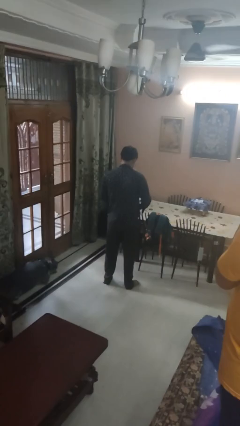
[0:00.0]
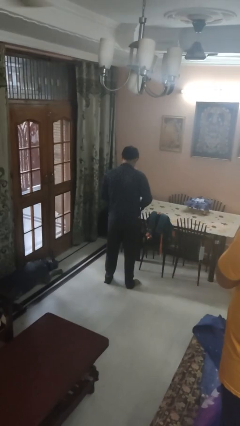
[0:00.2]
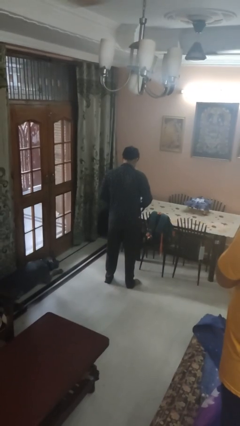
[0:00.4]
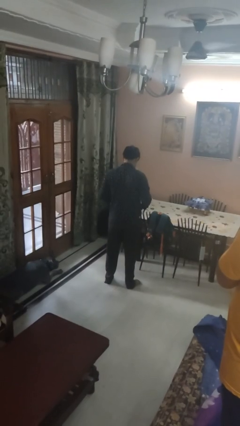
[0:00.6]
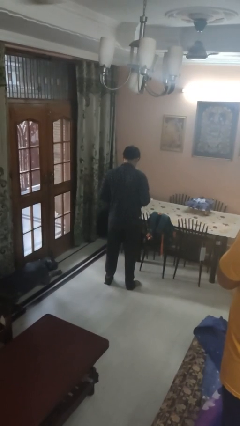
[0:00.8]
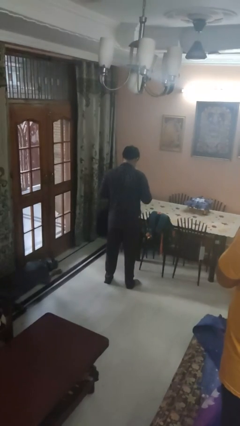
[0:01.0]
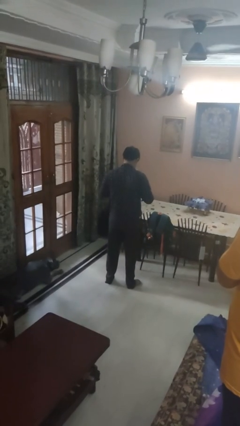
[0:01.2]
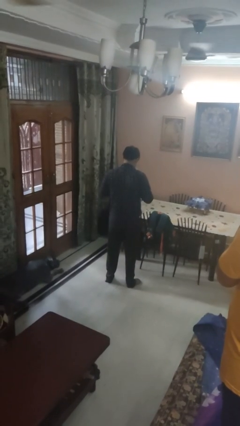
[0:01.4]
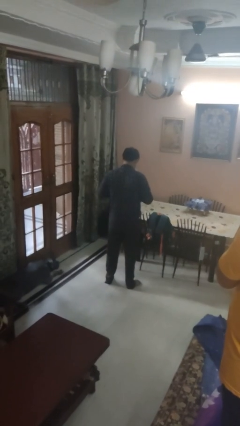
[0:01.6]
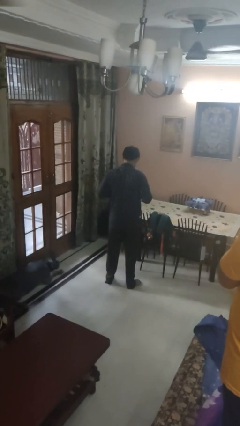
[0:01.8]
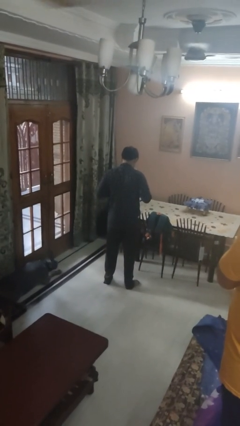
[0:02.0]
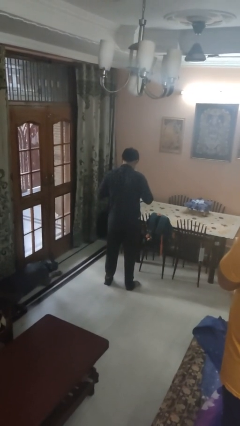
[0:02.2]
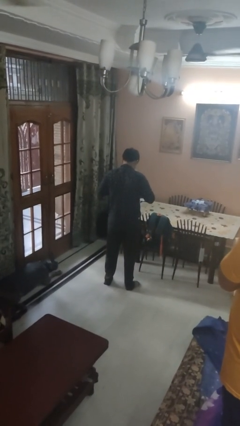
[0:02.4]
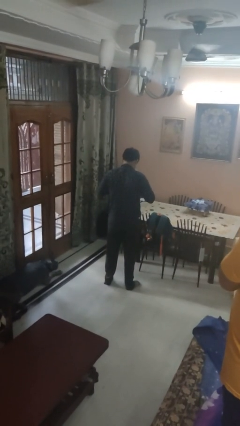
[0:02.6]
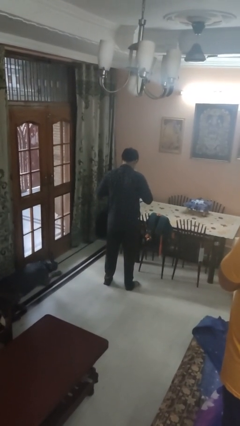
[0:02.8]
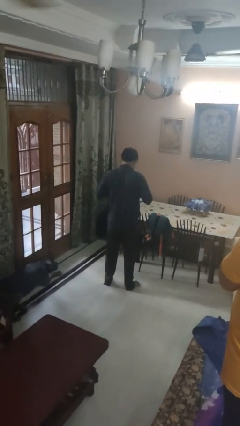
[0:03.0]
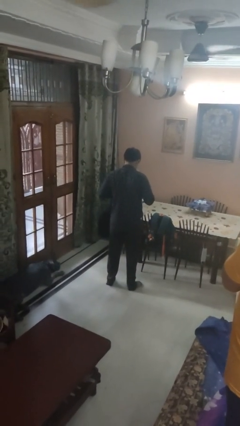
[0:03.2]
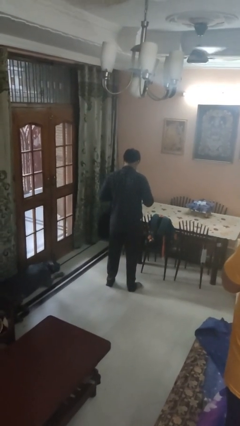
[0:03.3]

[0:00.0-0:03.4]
person unbuttons shirt

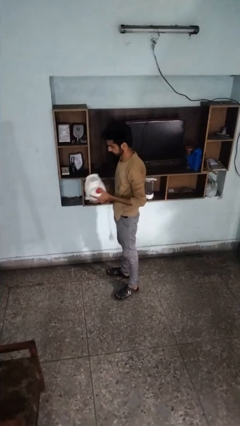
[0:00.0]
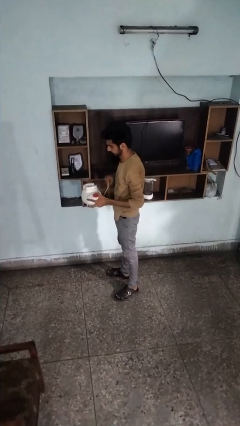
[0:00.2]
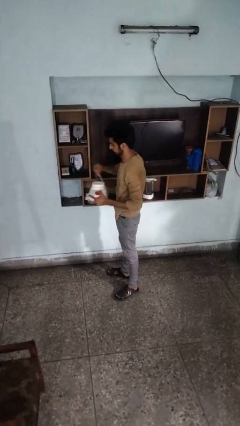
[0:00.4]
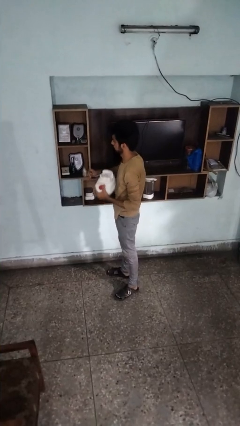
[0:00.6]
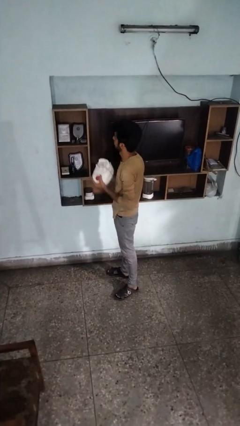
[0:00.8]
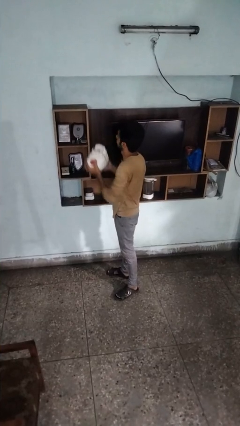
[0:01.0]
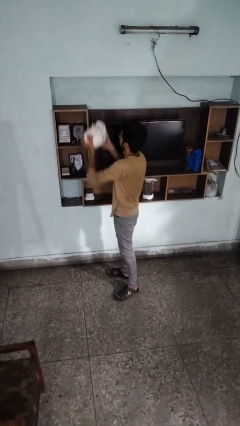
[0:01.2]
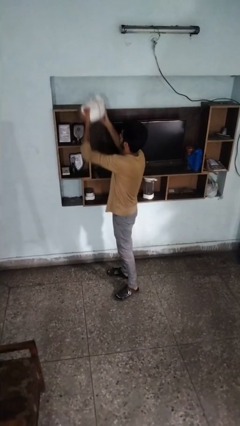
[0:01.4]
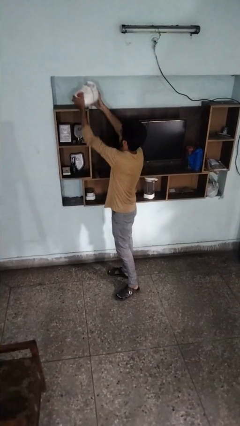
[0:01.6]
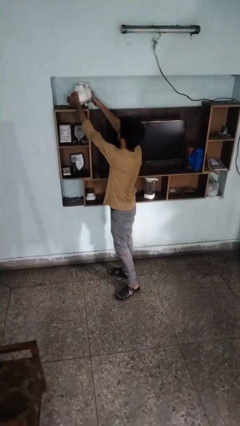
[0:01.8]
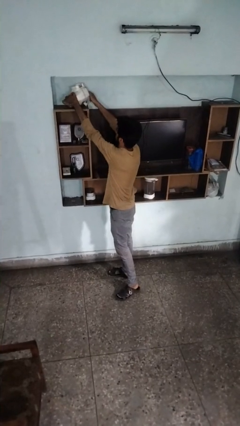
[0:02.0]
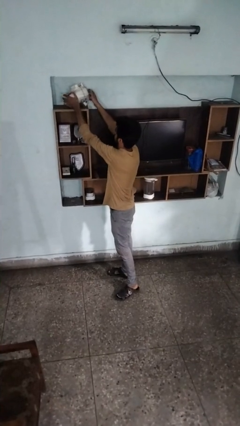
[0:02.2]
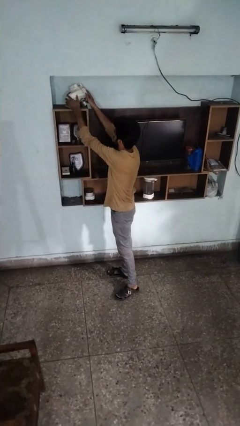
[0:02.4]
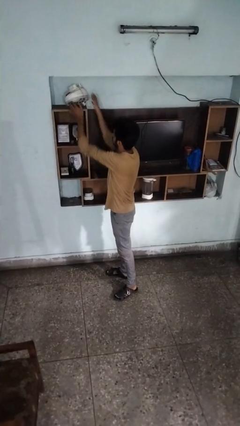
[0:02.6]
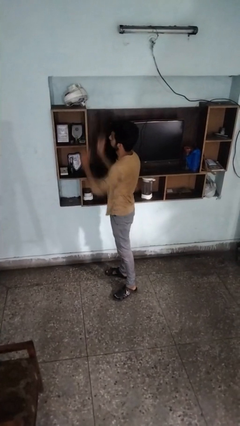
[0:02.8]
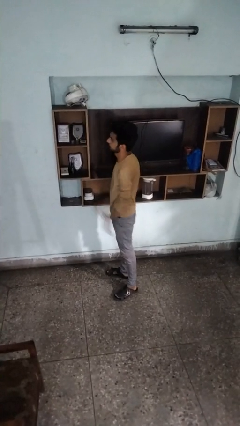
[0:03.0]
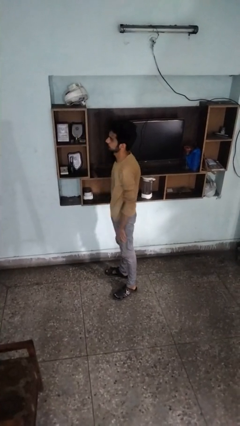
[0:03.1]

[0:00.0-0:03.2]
person puts down object on shelf

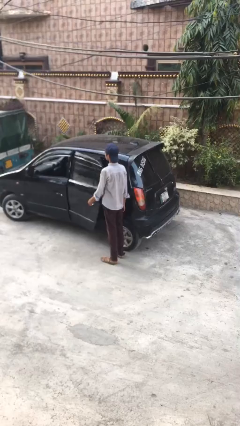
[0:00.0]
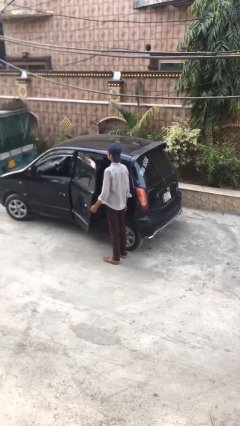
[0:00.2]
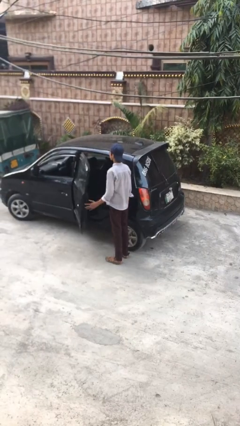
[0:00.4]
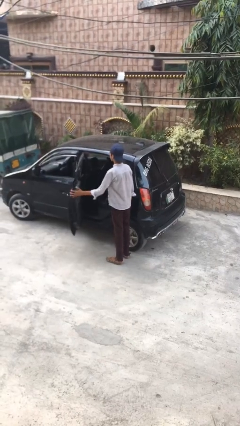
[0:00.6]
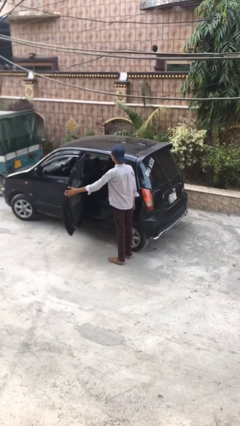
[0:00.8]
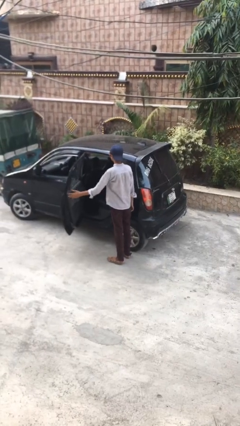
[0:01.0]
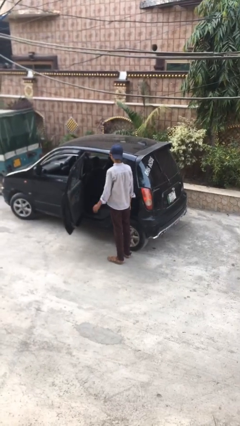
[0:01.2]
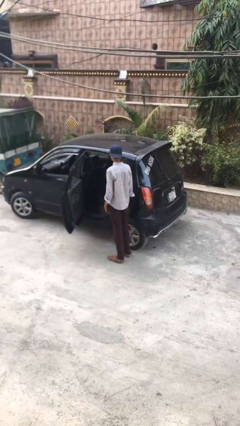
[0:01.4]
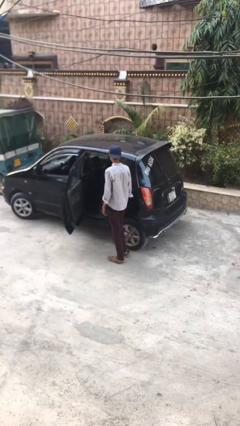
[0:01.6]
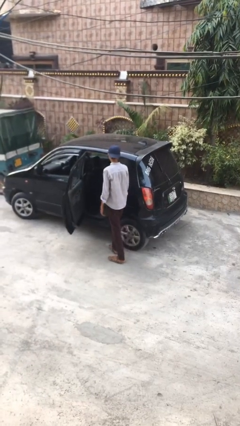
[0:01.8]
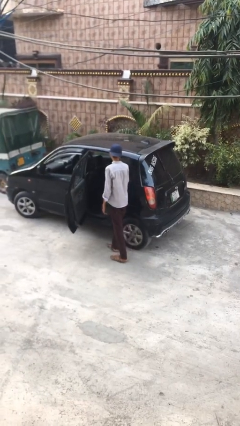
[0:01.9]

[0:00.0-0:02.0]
person opens car door

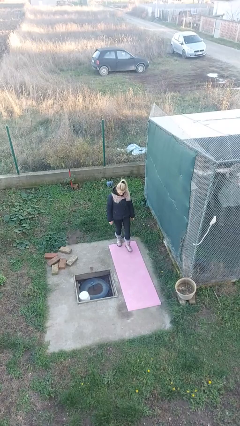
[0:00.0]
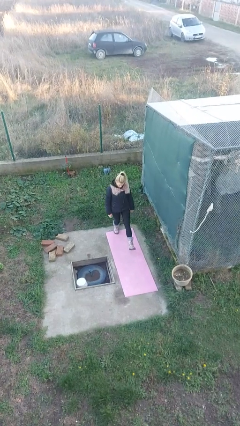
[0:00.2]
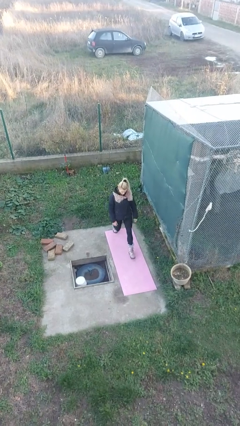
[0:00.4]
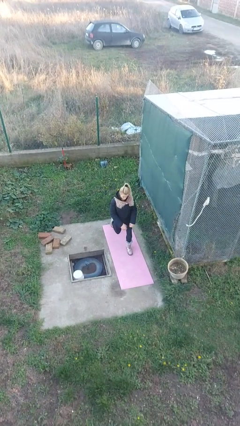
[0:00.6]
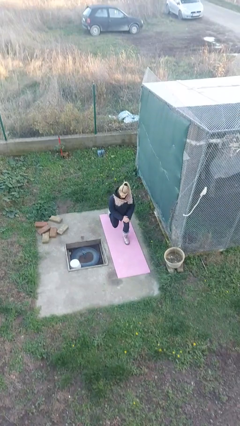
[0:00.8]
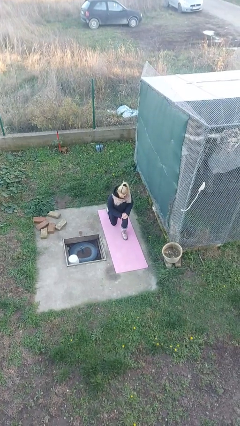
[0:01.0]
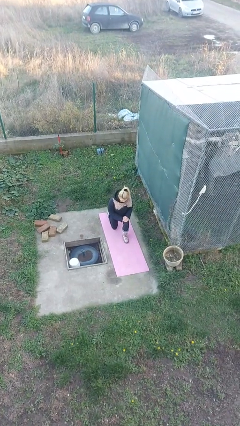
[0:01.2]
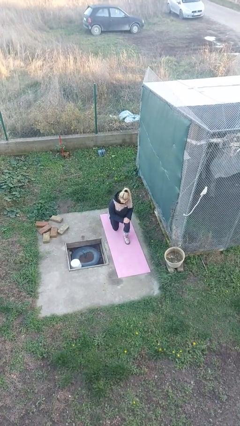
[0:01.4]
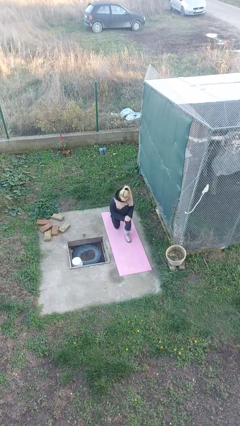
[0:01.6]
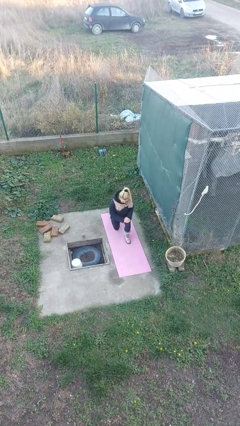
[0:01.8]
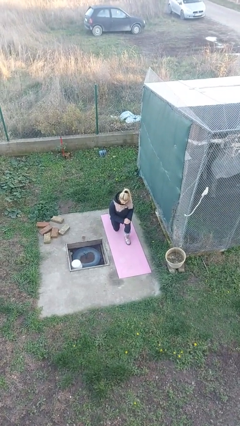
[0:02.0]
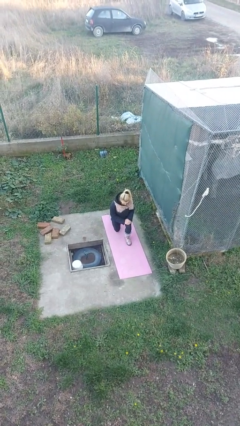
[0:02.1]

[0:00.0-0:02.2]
person kneels

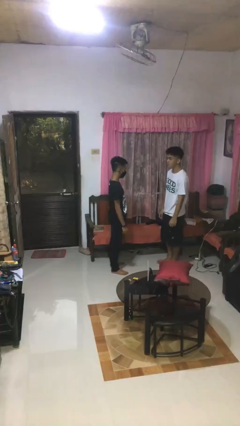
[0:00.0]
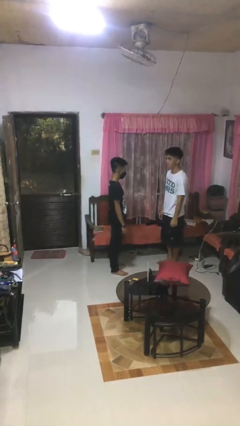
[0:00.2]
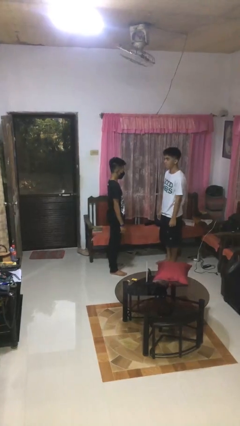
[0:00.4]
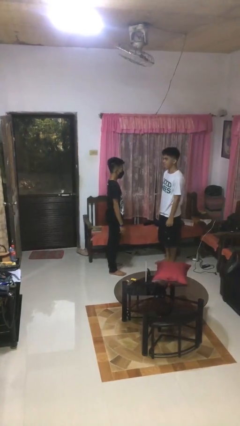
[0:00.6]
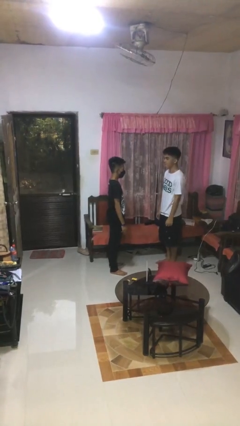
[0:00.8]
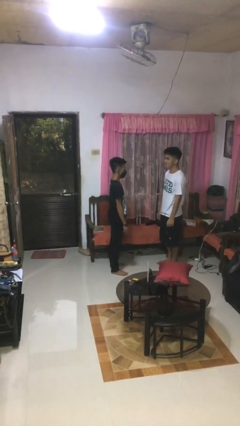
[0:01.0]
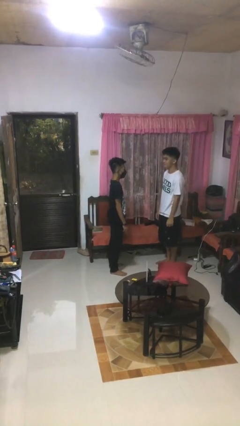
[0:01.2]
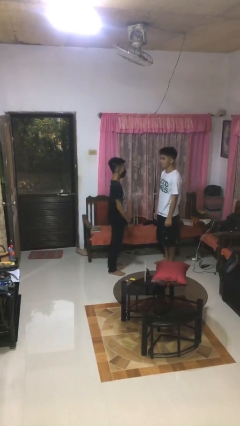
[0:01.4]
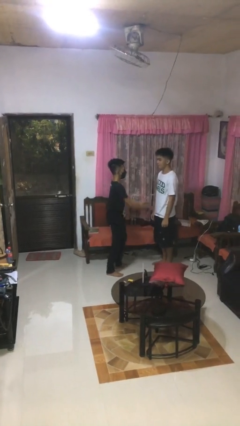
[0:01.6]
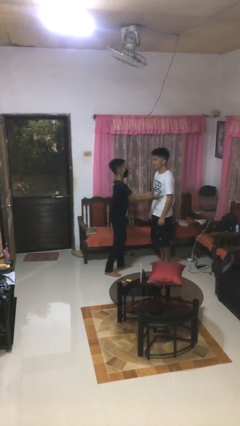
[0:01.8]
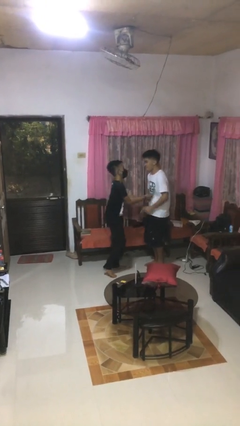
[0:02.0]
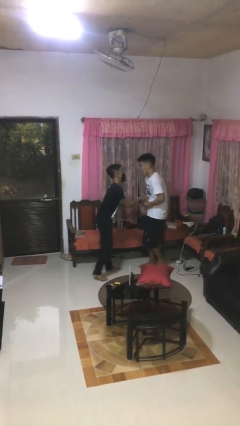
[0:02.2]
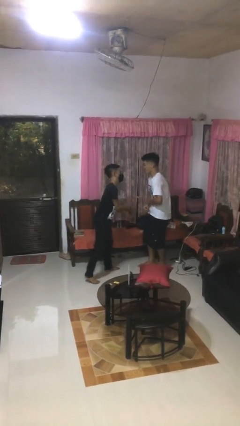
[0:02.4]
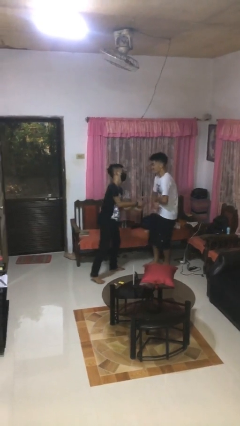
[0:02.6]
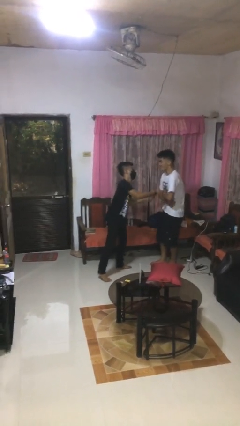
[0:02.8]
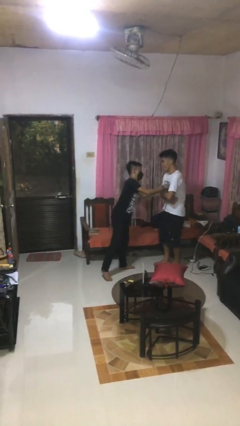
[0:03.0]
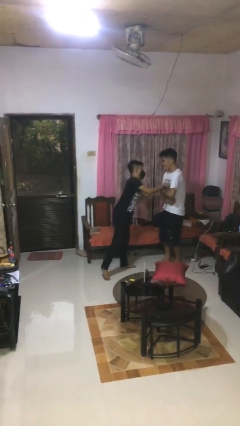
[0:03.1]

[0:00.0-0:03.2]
person tickles person

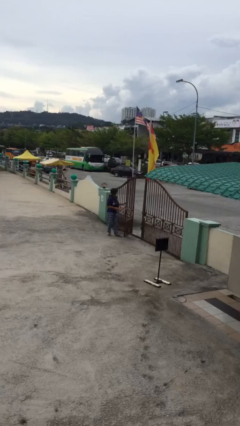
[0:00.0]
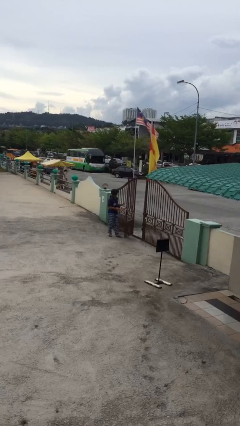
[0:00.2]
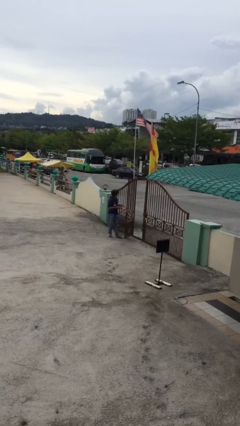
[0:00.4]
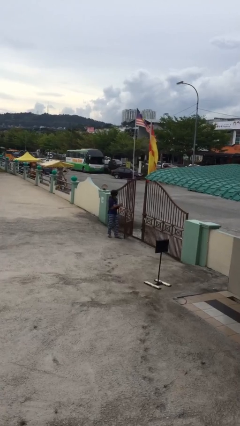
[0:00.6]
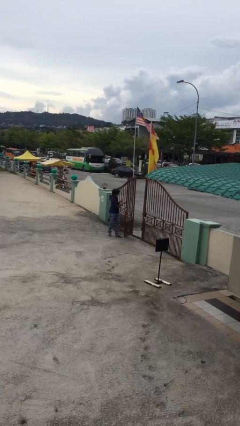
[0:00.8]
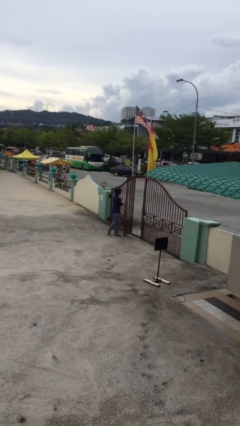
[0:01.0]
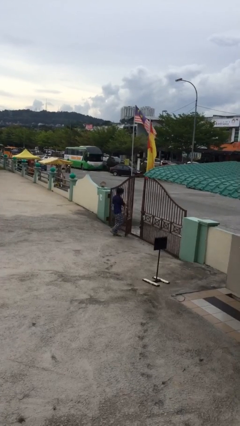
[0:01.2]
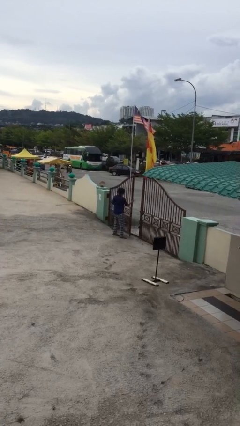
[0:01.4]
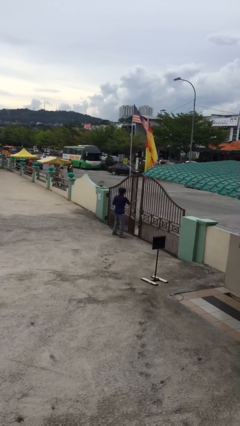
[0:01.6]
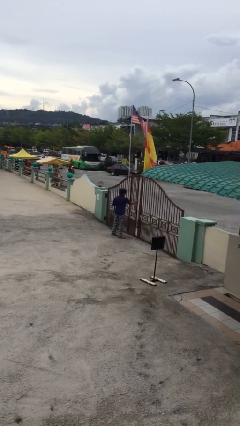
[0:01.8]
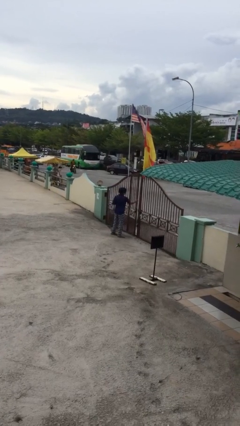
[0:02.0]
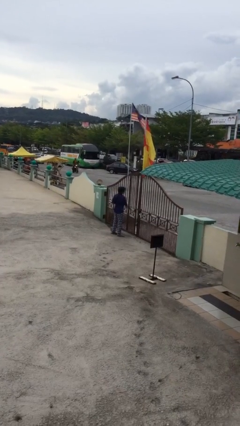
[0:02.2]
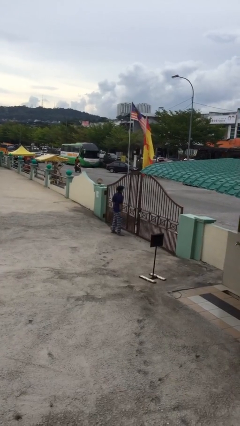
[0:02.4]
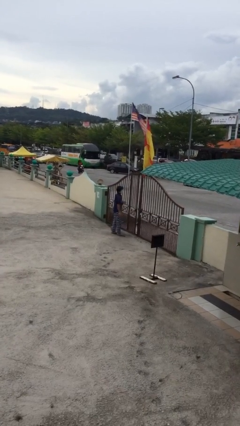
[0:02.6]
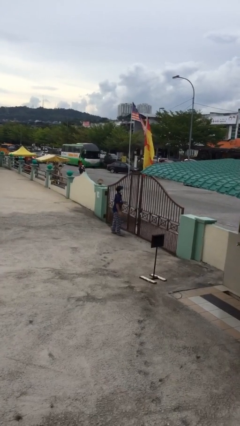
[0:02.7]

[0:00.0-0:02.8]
person closes facility door

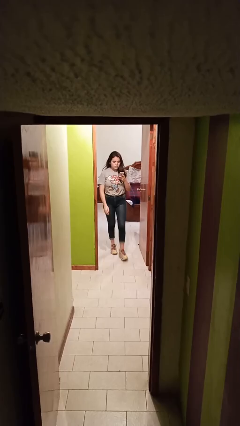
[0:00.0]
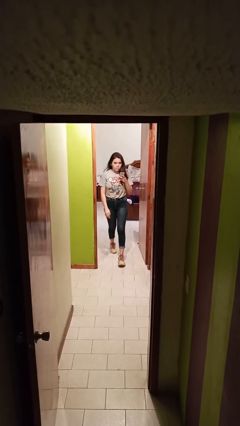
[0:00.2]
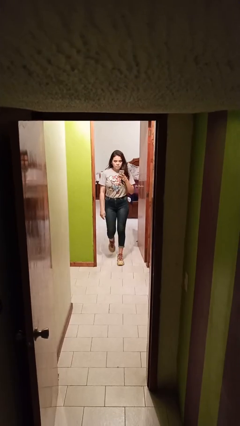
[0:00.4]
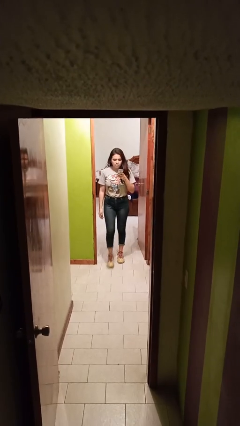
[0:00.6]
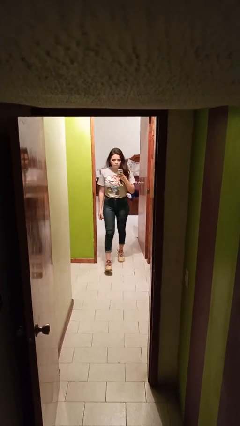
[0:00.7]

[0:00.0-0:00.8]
person enters scene through structure
